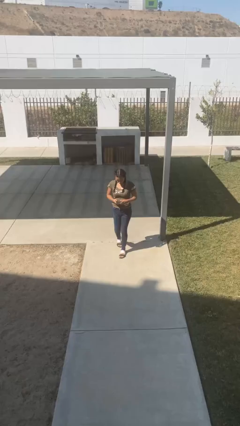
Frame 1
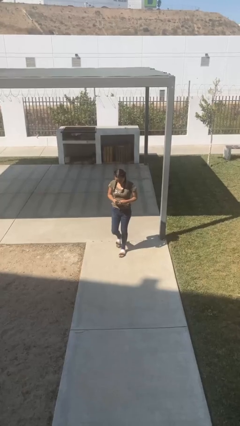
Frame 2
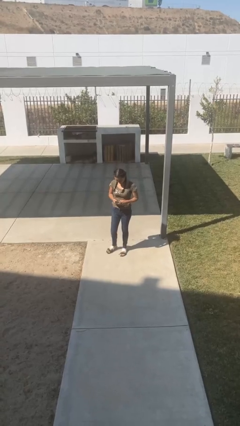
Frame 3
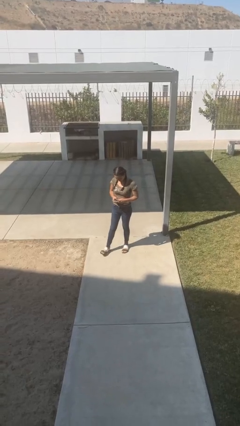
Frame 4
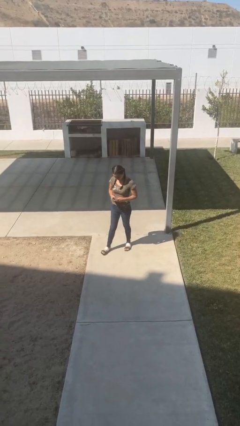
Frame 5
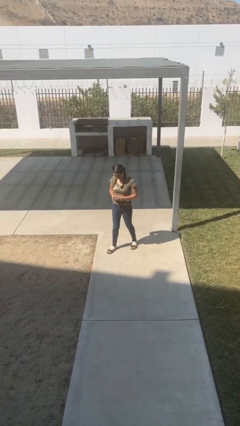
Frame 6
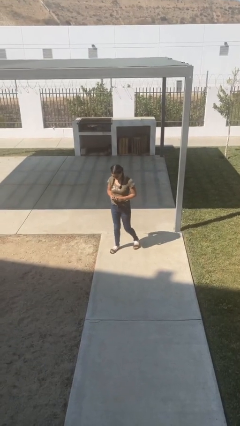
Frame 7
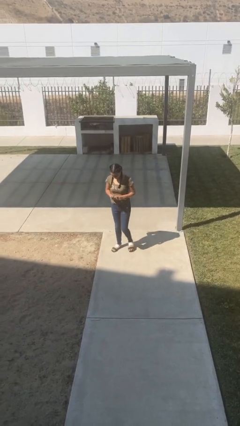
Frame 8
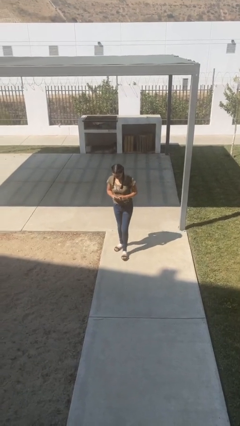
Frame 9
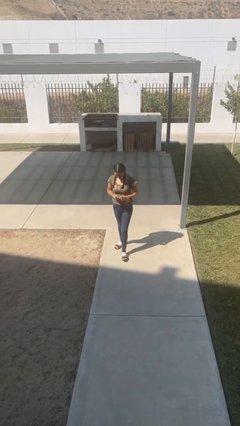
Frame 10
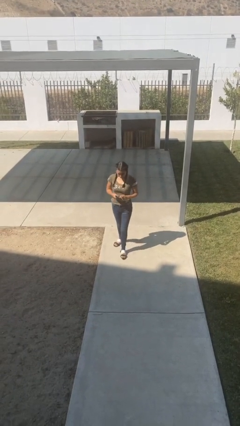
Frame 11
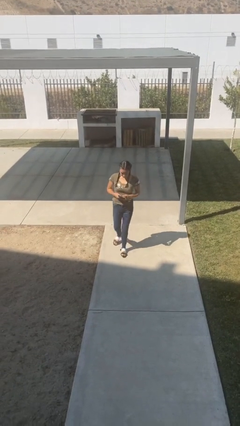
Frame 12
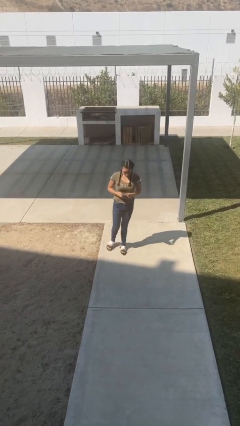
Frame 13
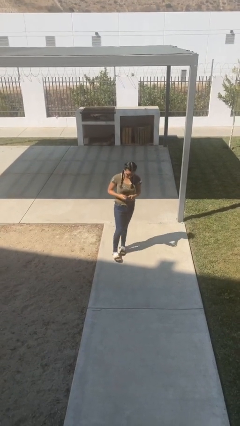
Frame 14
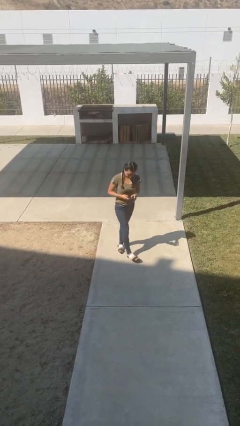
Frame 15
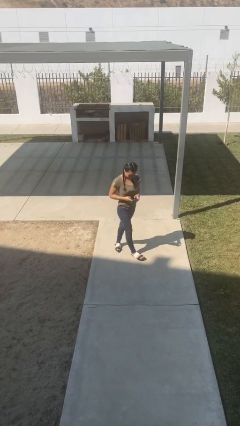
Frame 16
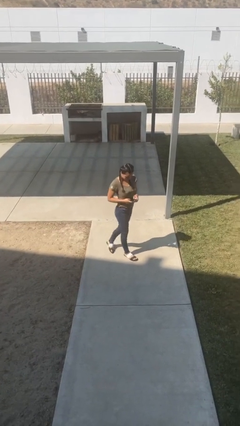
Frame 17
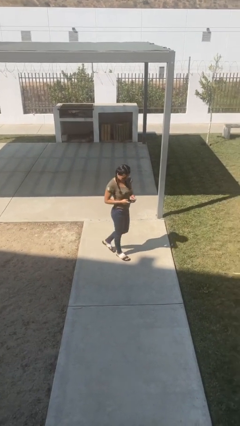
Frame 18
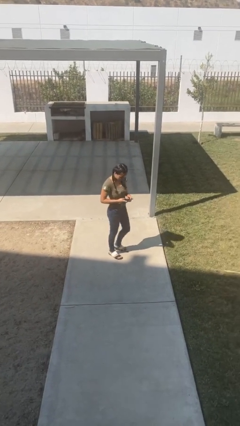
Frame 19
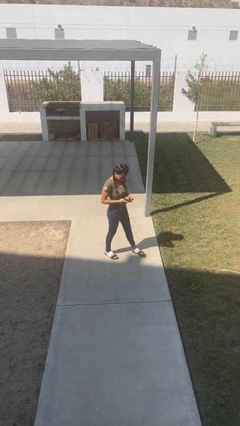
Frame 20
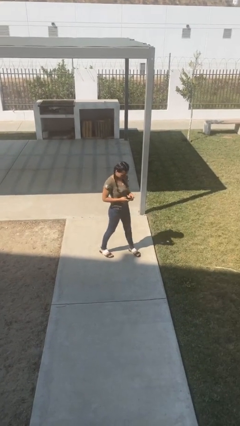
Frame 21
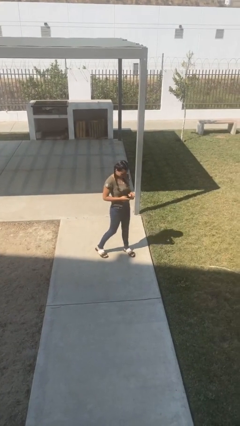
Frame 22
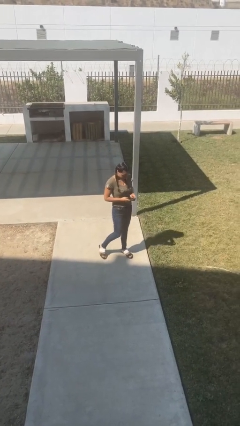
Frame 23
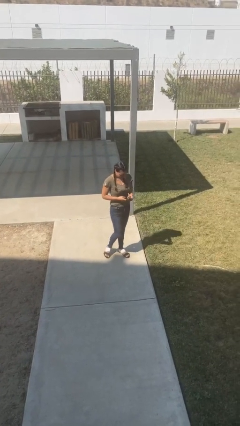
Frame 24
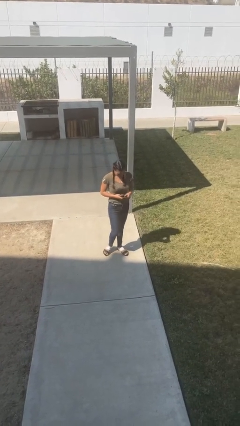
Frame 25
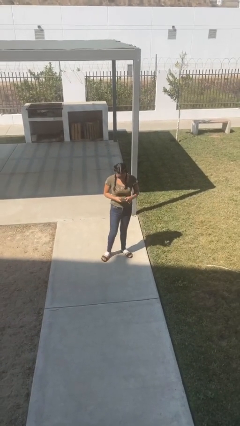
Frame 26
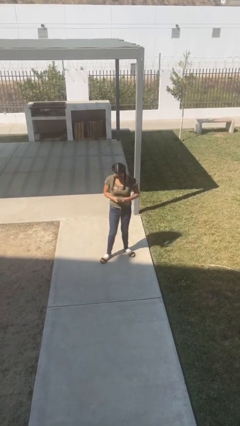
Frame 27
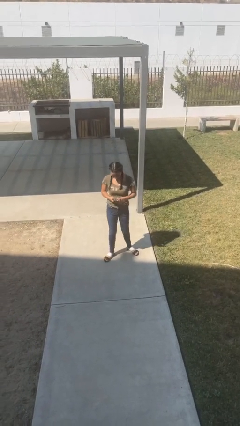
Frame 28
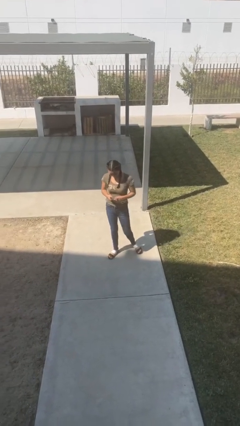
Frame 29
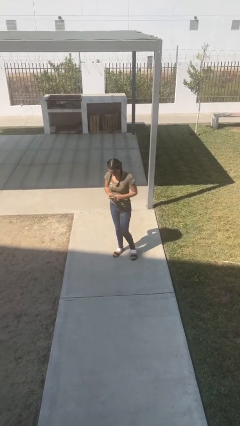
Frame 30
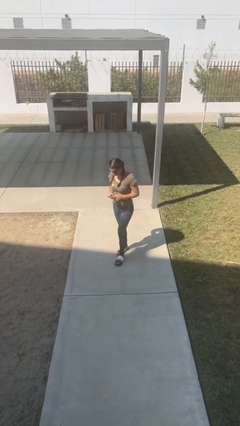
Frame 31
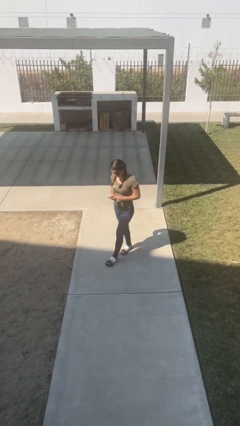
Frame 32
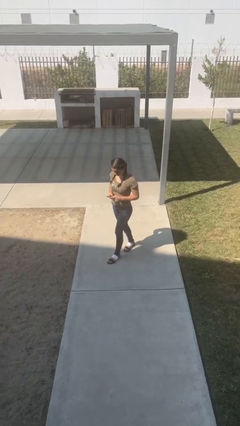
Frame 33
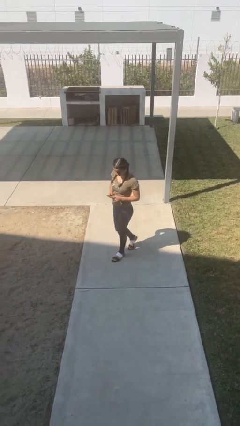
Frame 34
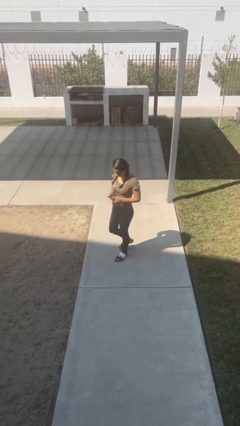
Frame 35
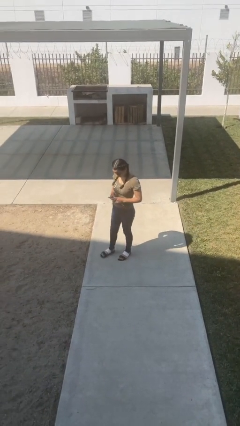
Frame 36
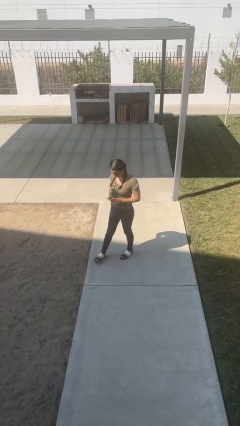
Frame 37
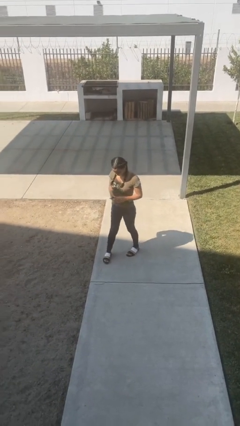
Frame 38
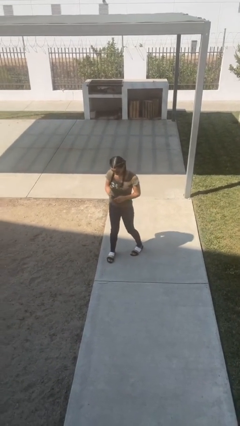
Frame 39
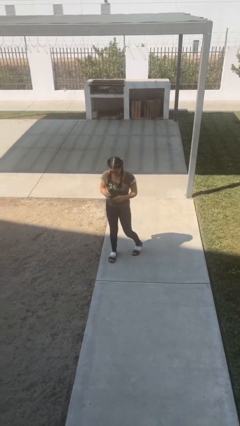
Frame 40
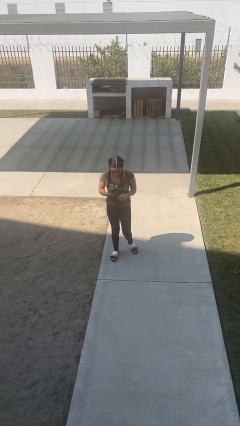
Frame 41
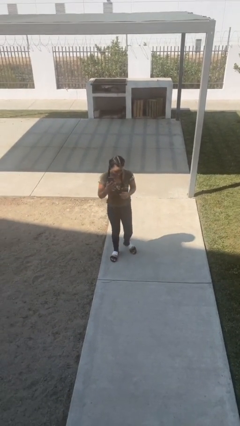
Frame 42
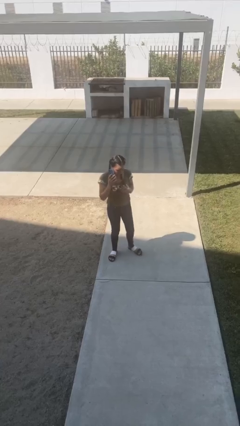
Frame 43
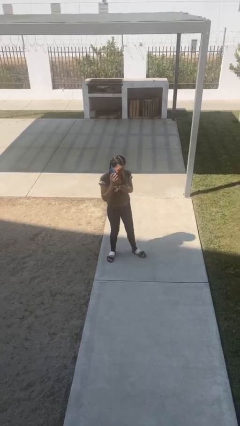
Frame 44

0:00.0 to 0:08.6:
person texts on phone

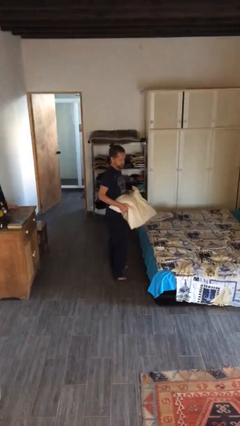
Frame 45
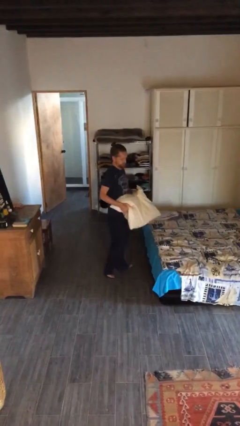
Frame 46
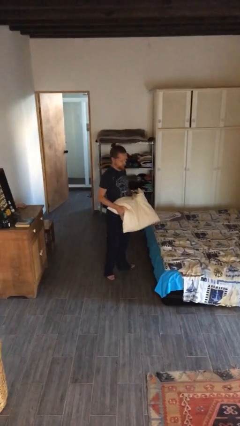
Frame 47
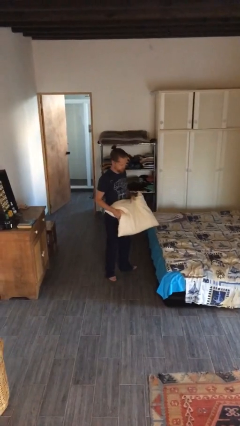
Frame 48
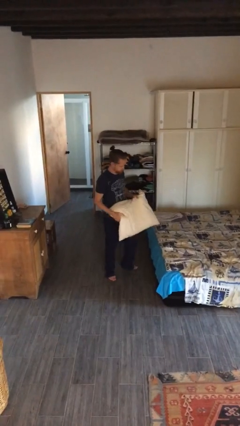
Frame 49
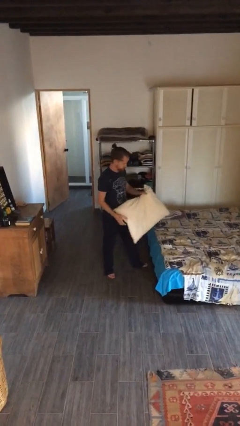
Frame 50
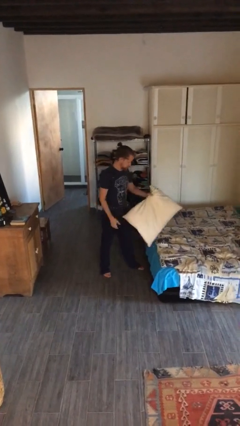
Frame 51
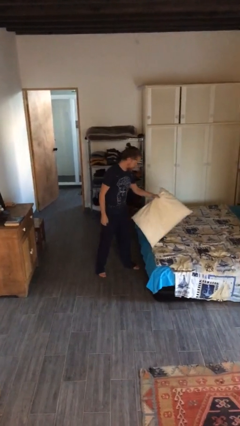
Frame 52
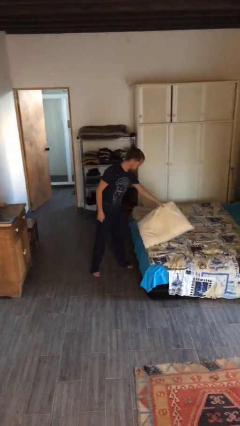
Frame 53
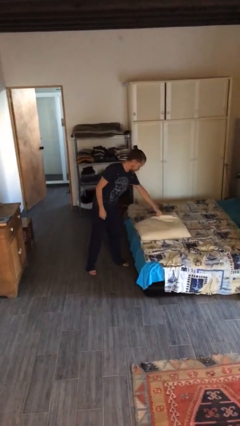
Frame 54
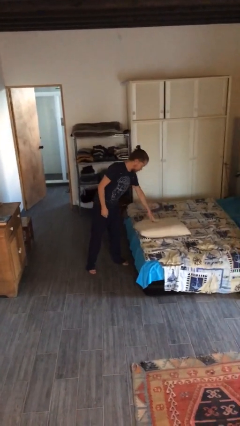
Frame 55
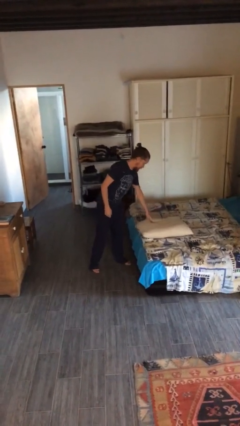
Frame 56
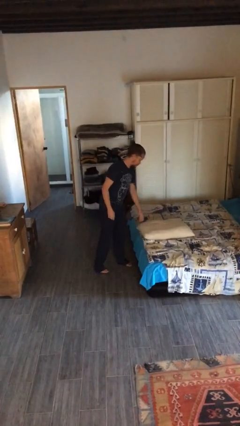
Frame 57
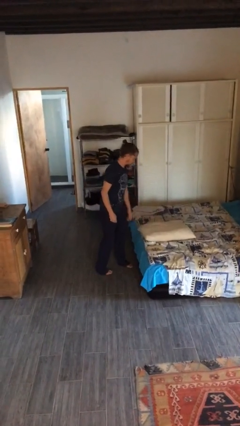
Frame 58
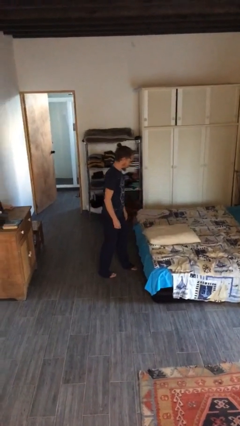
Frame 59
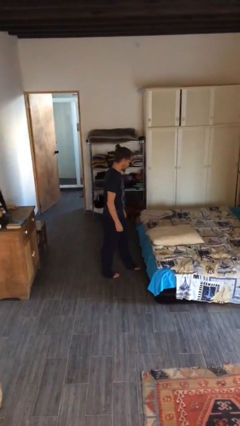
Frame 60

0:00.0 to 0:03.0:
person puts down object on bed

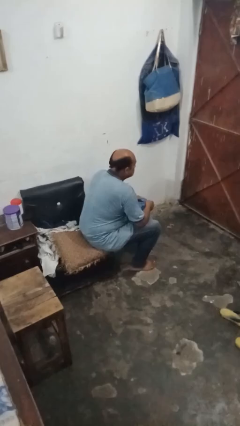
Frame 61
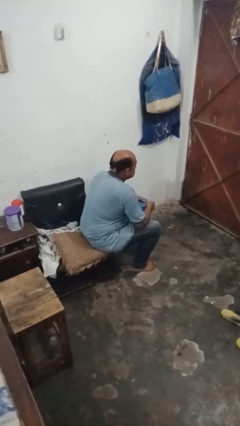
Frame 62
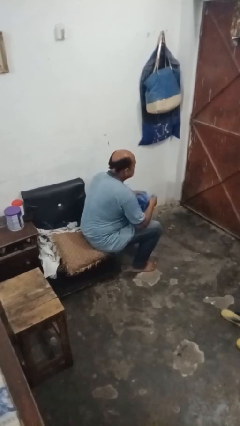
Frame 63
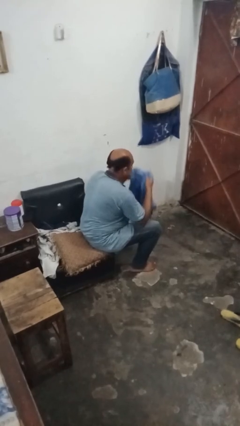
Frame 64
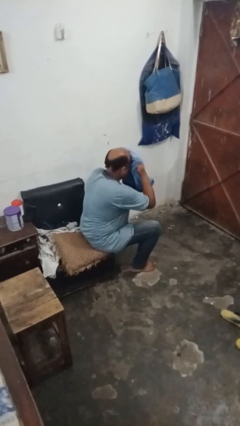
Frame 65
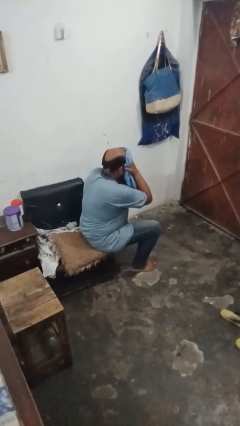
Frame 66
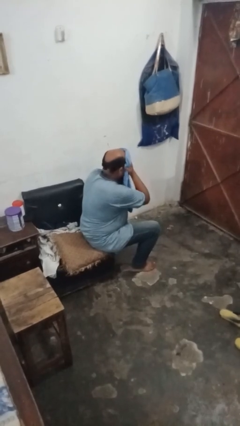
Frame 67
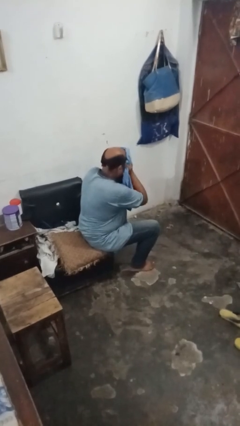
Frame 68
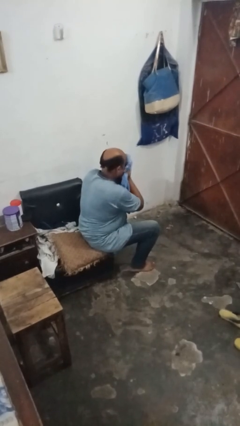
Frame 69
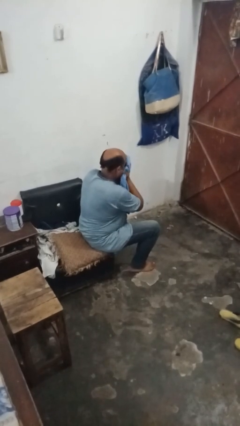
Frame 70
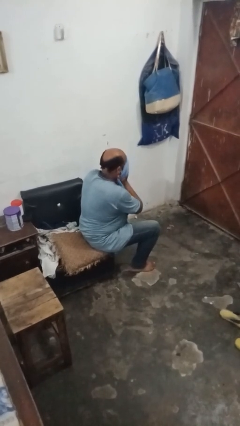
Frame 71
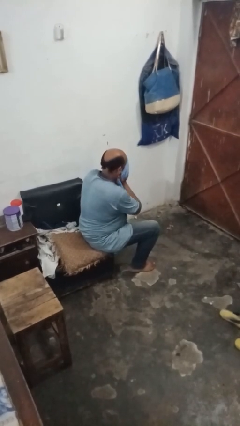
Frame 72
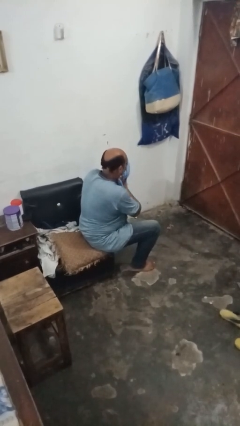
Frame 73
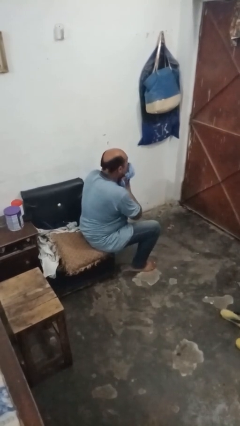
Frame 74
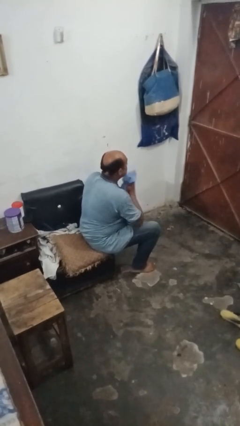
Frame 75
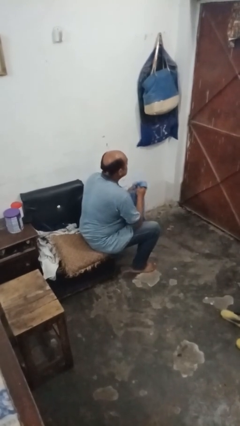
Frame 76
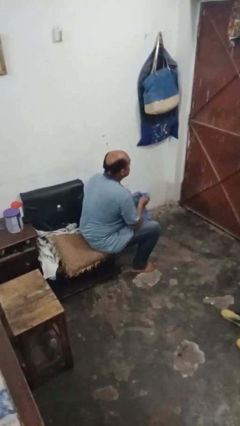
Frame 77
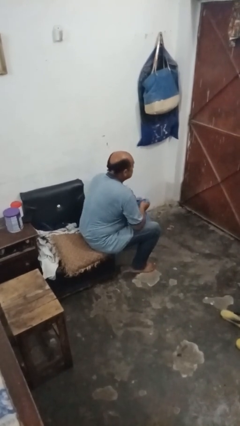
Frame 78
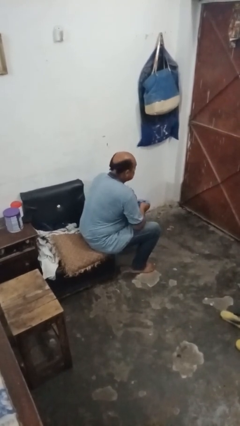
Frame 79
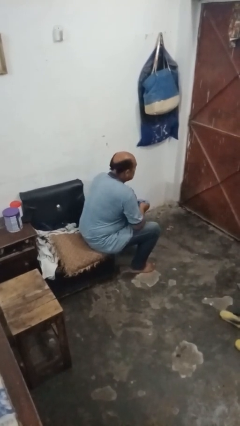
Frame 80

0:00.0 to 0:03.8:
person wipes mouth with napkin

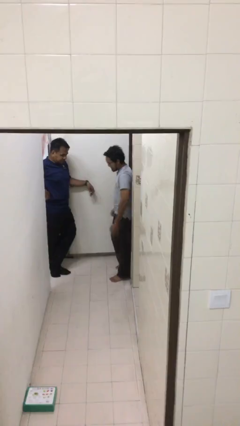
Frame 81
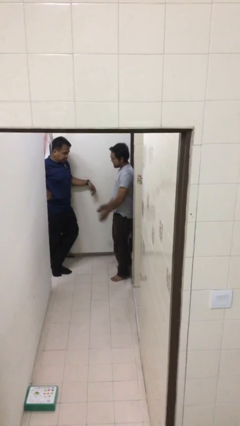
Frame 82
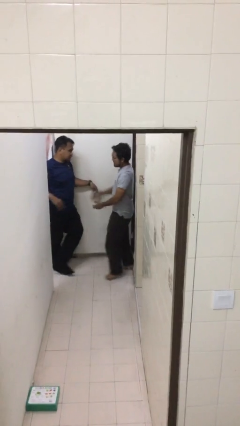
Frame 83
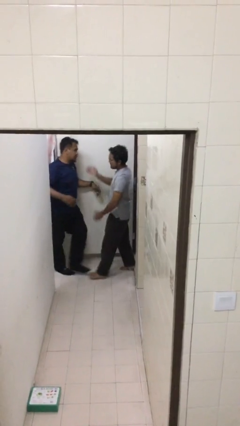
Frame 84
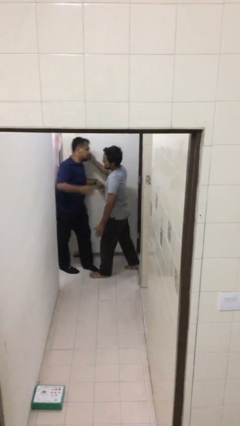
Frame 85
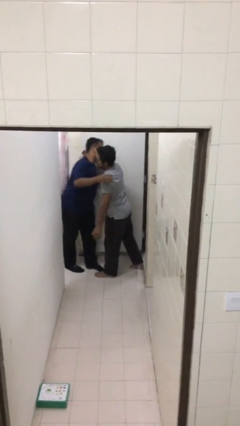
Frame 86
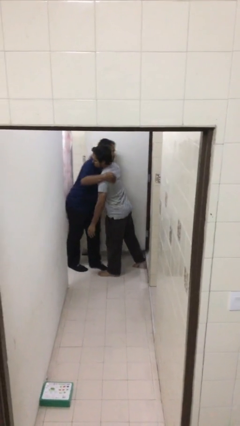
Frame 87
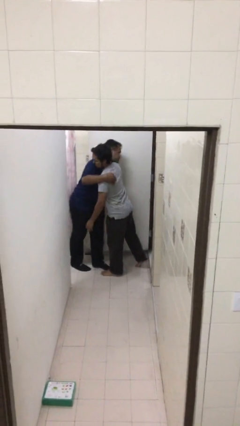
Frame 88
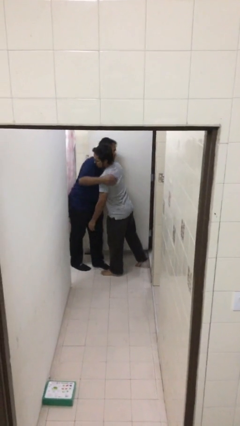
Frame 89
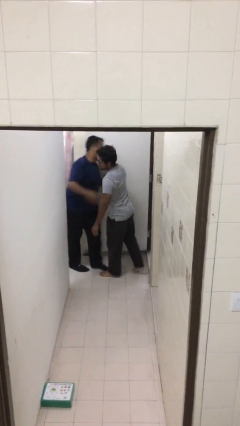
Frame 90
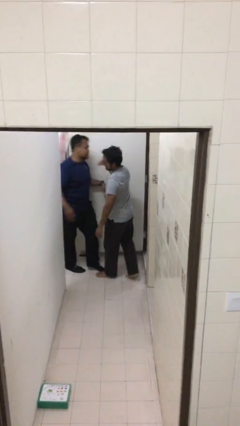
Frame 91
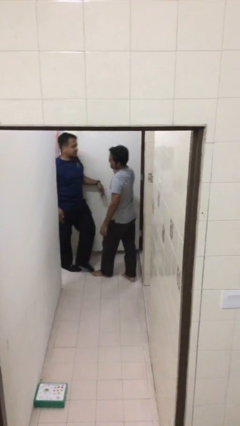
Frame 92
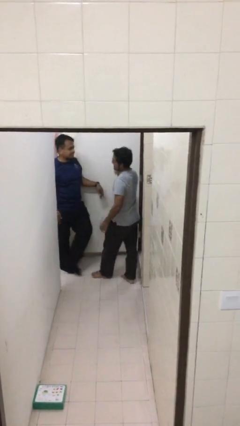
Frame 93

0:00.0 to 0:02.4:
person embraces person
